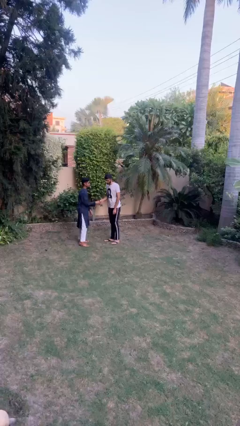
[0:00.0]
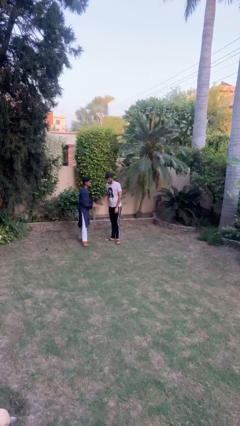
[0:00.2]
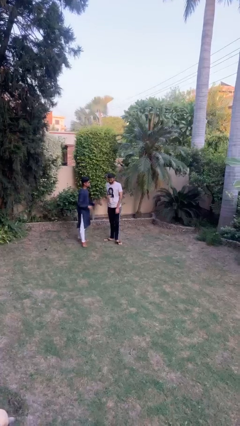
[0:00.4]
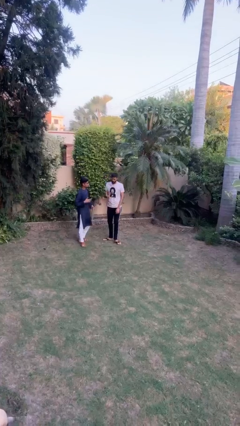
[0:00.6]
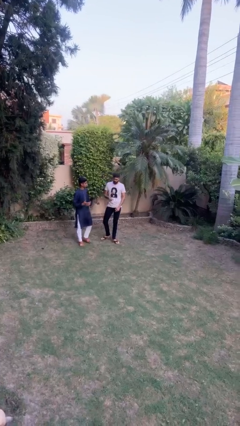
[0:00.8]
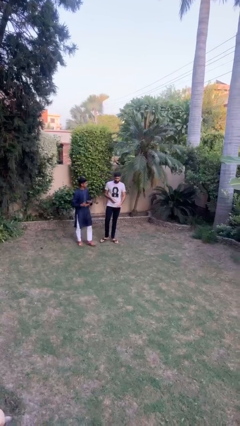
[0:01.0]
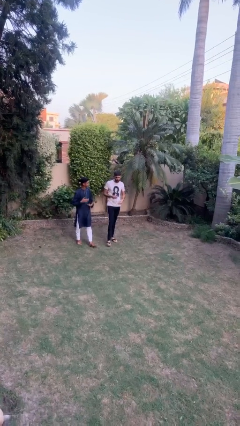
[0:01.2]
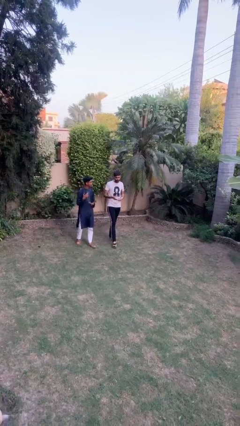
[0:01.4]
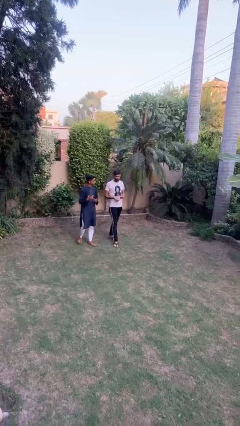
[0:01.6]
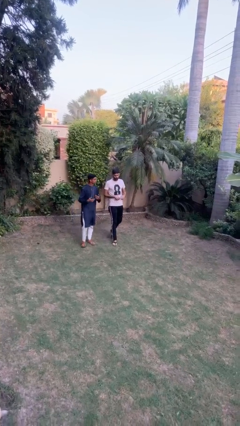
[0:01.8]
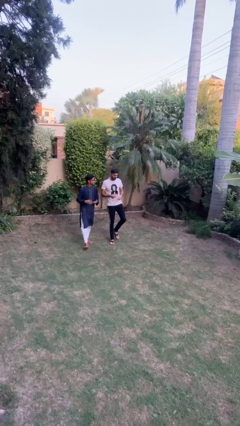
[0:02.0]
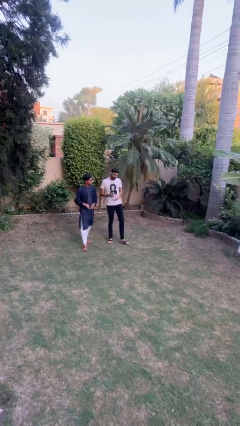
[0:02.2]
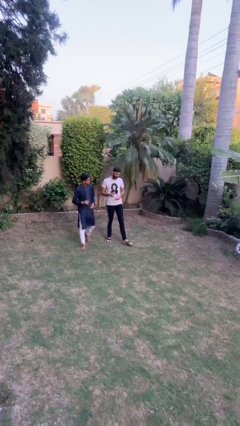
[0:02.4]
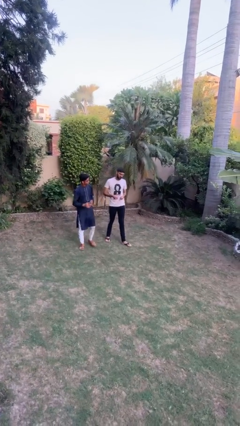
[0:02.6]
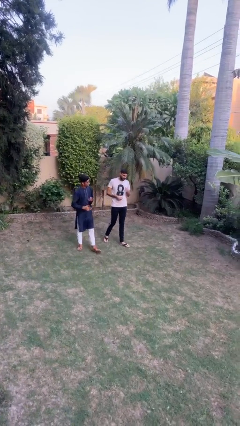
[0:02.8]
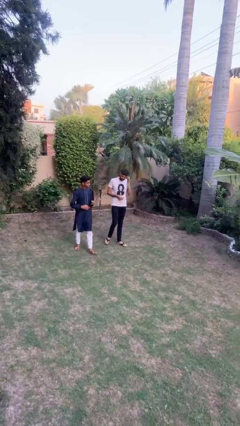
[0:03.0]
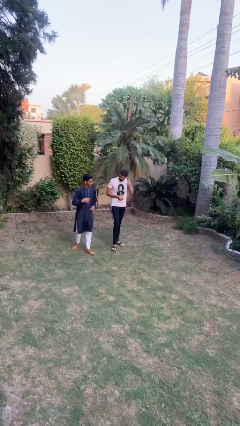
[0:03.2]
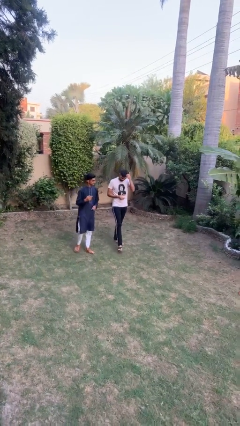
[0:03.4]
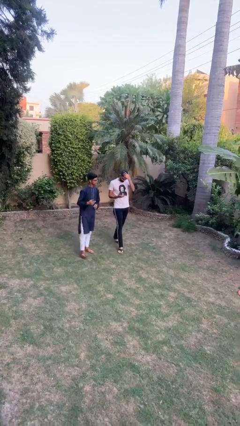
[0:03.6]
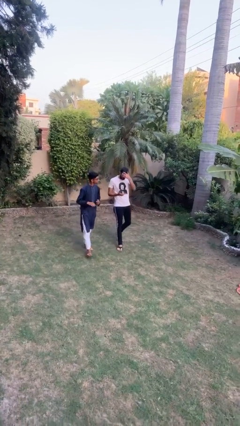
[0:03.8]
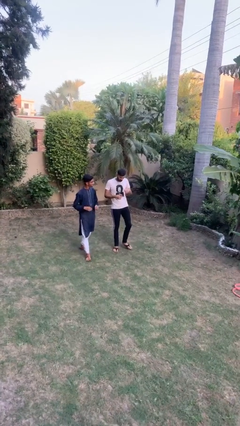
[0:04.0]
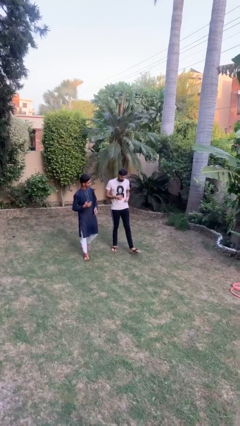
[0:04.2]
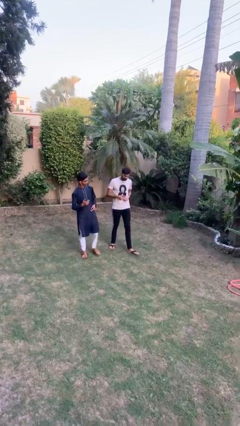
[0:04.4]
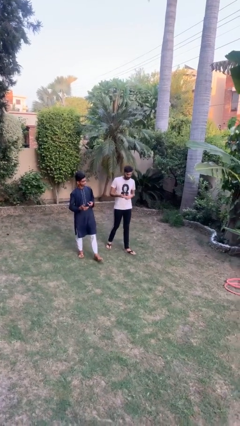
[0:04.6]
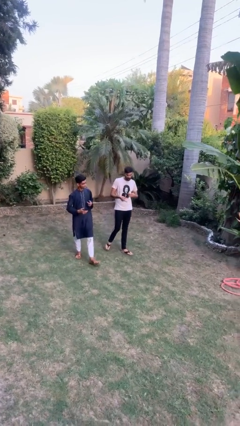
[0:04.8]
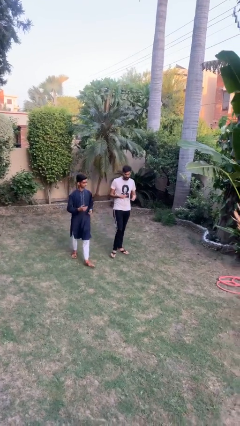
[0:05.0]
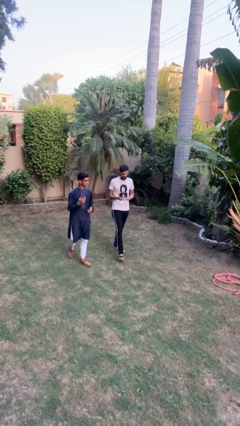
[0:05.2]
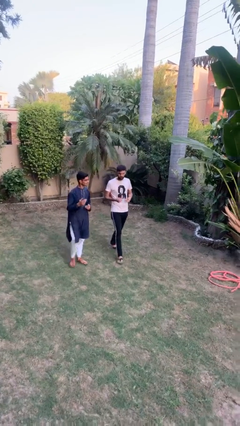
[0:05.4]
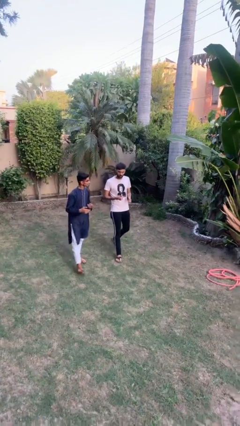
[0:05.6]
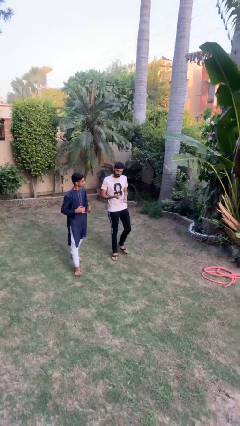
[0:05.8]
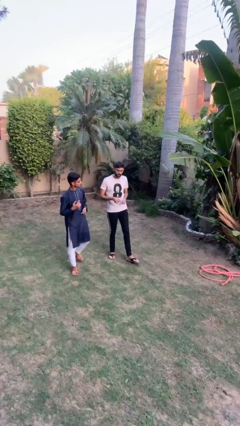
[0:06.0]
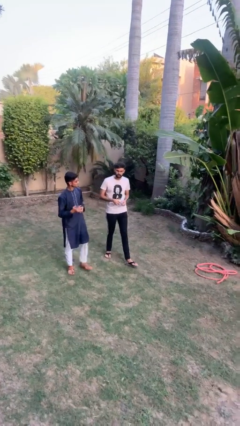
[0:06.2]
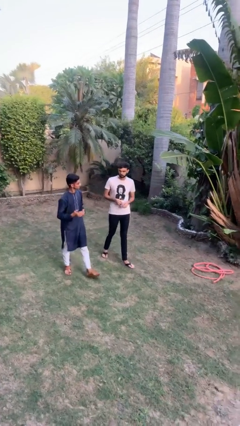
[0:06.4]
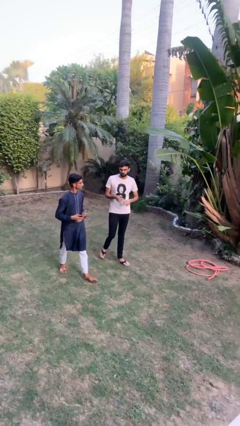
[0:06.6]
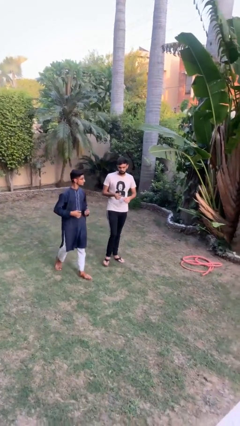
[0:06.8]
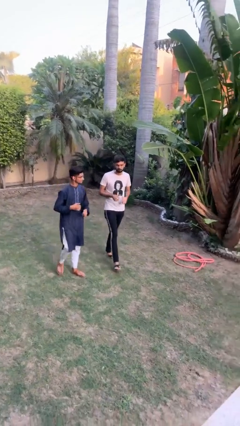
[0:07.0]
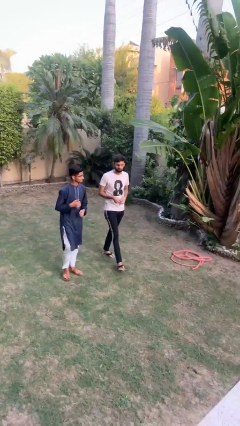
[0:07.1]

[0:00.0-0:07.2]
person talks to person

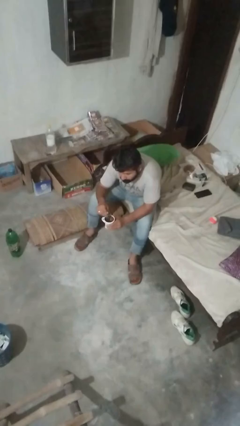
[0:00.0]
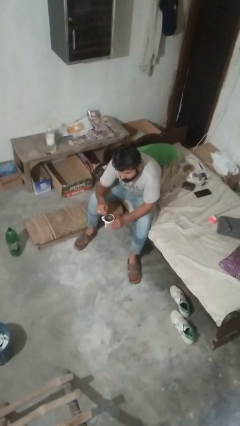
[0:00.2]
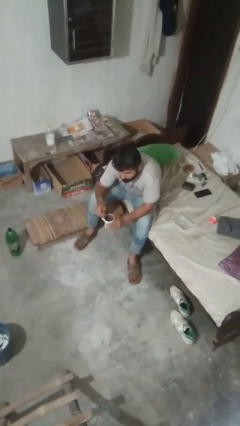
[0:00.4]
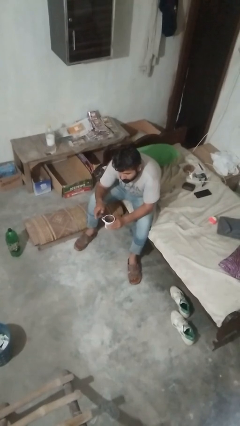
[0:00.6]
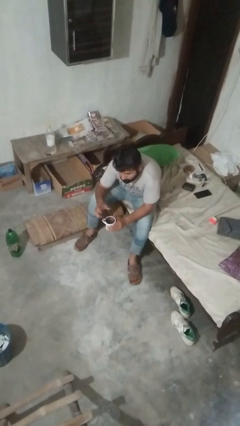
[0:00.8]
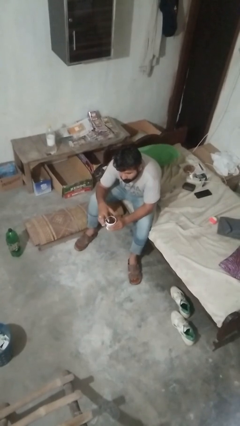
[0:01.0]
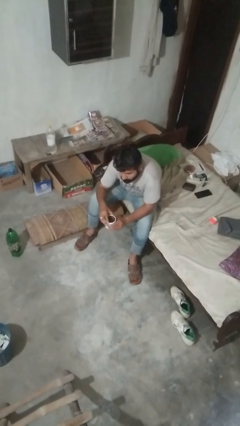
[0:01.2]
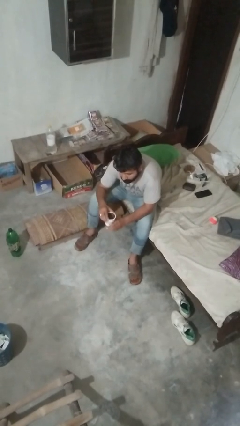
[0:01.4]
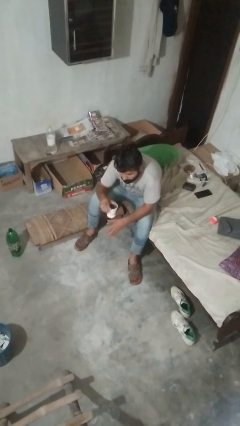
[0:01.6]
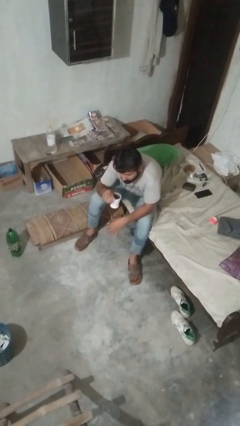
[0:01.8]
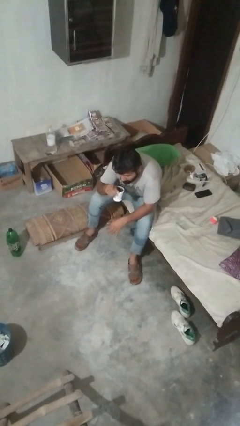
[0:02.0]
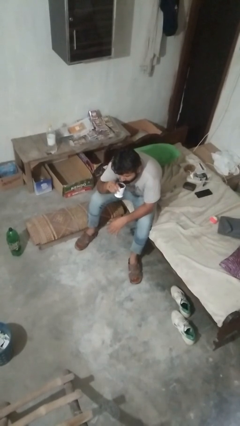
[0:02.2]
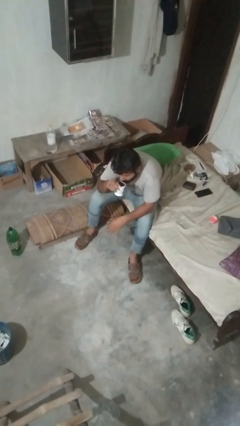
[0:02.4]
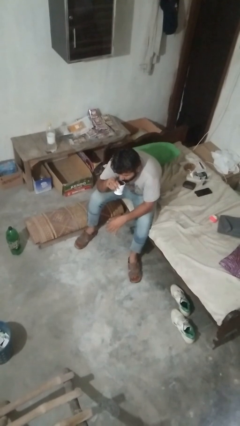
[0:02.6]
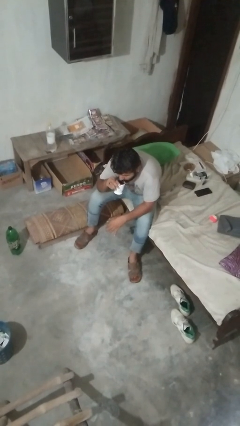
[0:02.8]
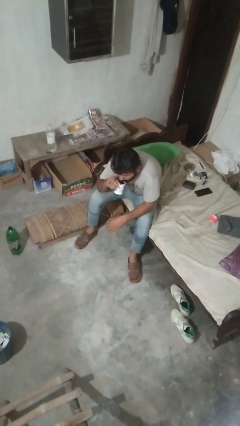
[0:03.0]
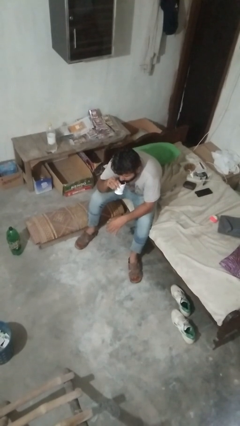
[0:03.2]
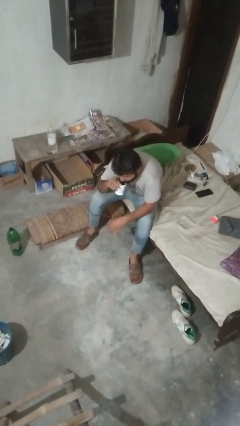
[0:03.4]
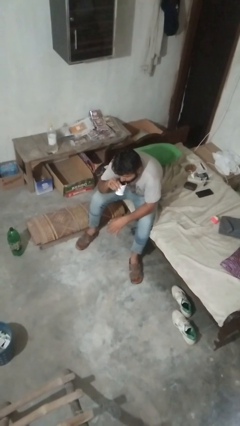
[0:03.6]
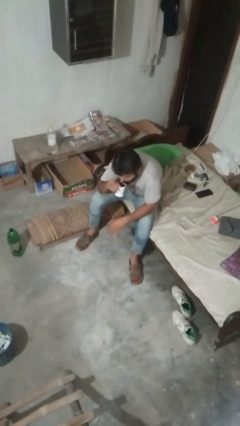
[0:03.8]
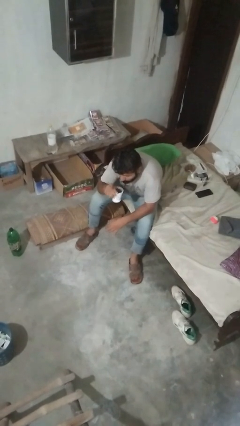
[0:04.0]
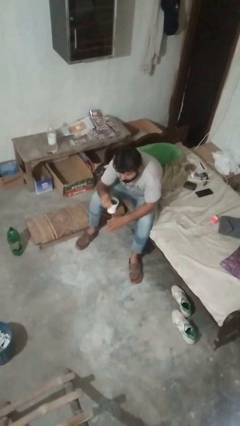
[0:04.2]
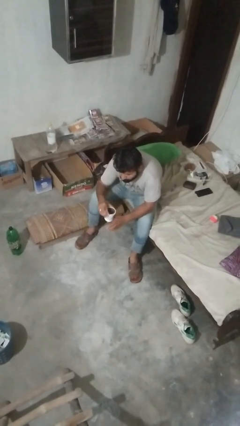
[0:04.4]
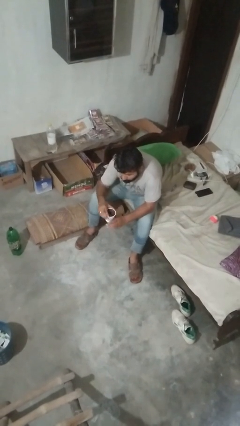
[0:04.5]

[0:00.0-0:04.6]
person drinks from mug

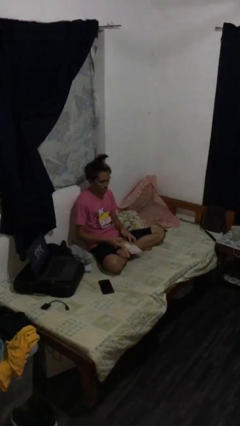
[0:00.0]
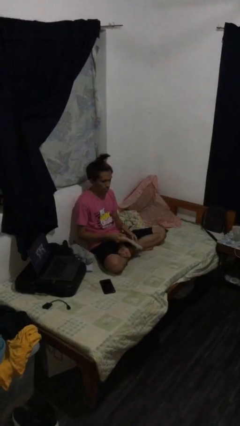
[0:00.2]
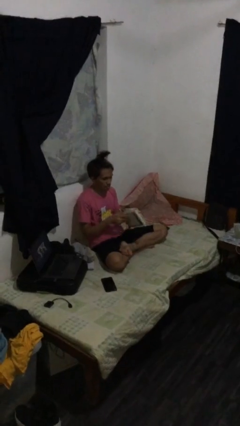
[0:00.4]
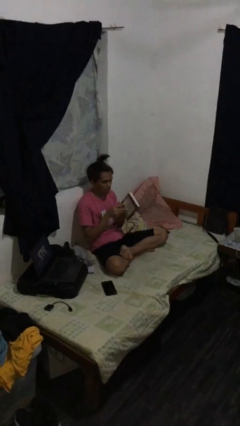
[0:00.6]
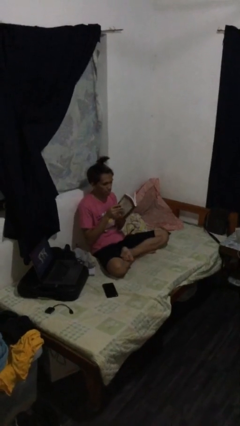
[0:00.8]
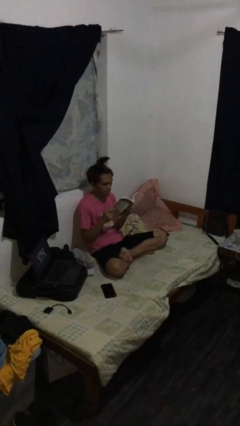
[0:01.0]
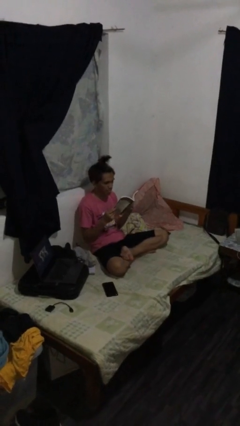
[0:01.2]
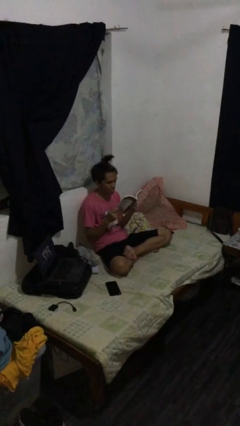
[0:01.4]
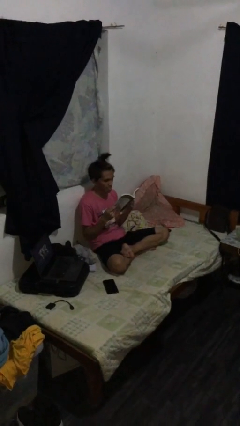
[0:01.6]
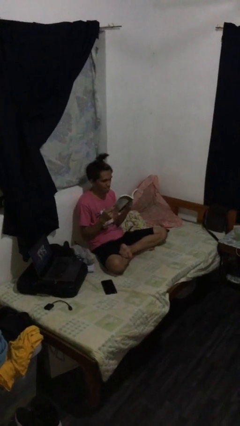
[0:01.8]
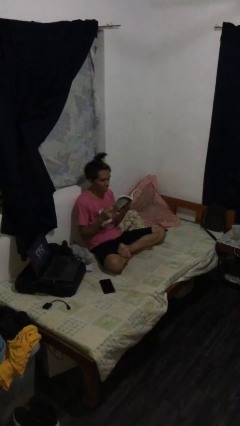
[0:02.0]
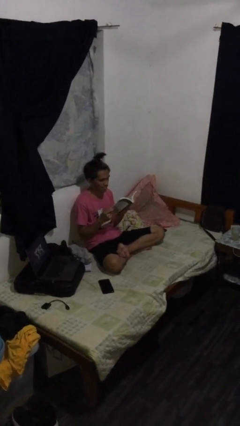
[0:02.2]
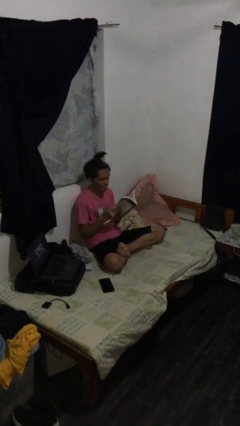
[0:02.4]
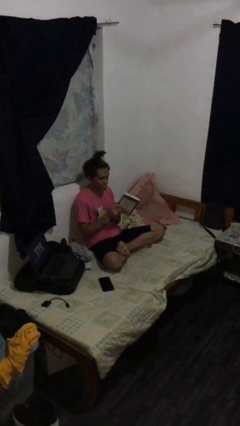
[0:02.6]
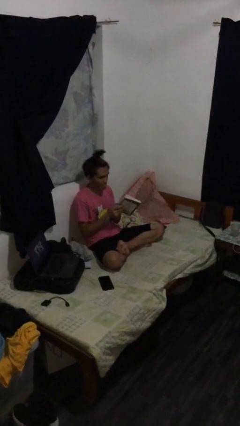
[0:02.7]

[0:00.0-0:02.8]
person reads document

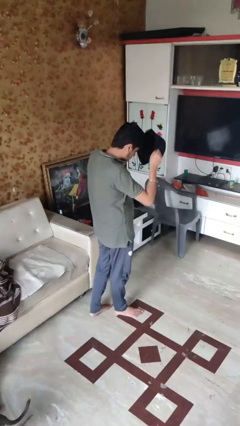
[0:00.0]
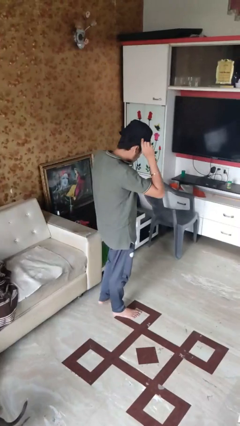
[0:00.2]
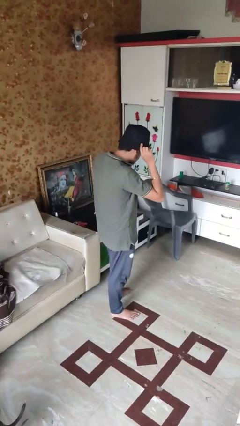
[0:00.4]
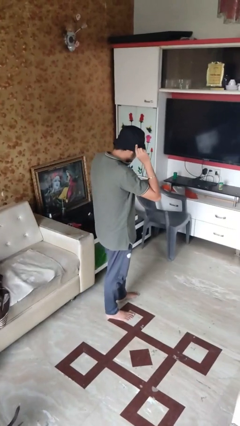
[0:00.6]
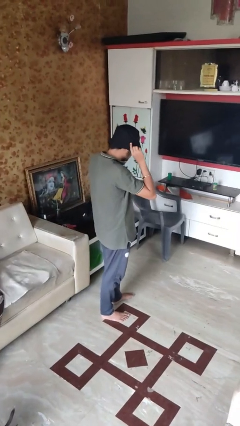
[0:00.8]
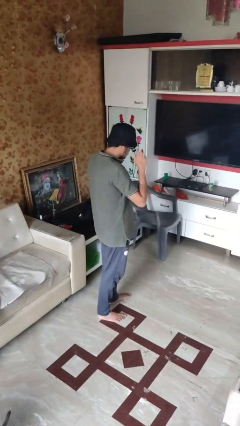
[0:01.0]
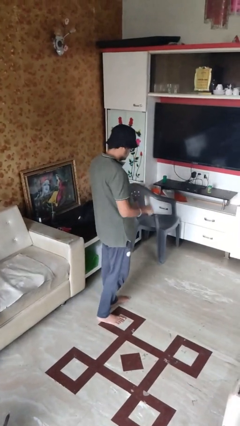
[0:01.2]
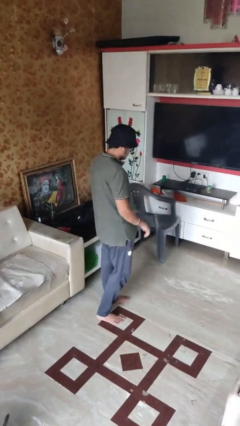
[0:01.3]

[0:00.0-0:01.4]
person puts on hat

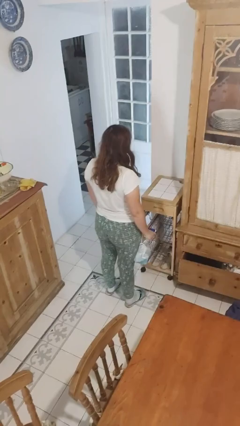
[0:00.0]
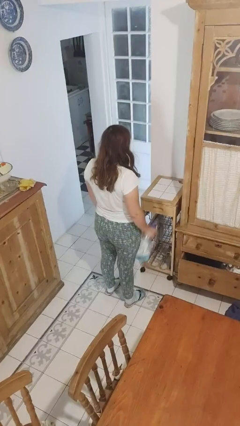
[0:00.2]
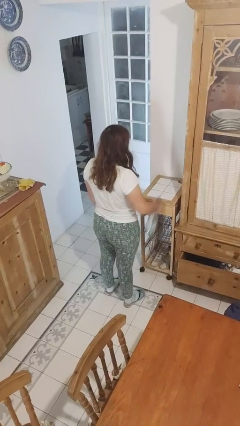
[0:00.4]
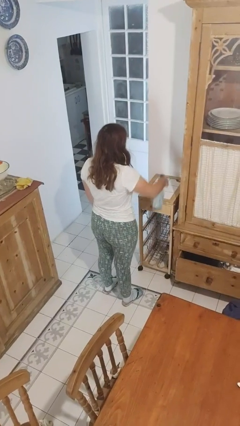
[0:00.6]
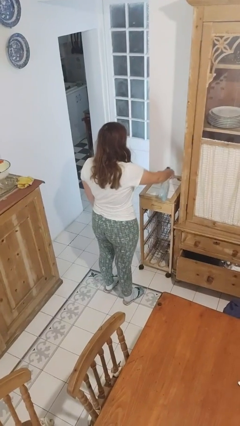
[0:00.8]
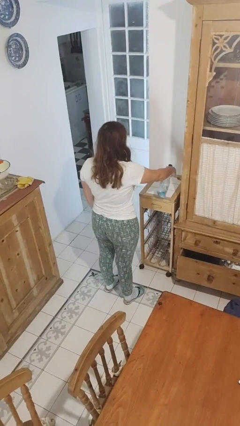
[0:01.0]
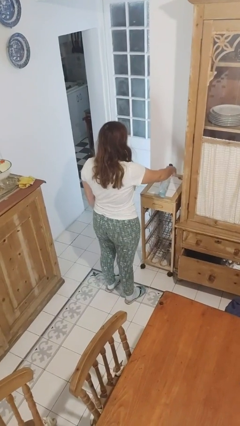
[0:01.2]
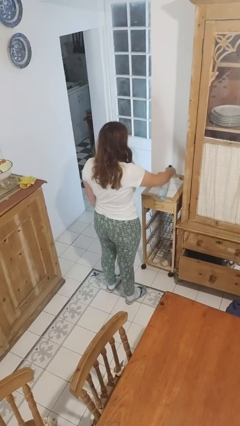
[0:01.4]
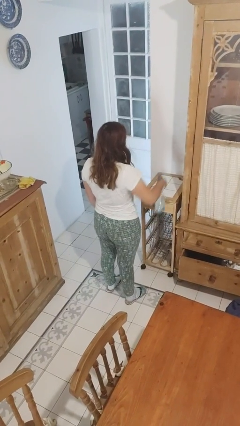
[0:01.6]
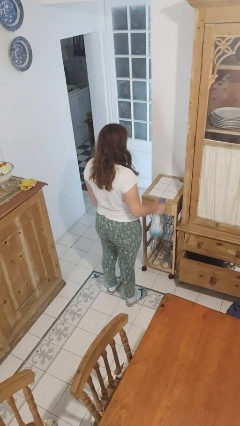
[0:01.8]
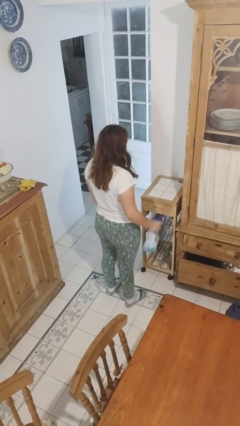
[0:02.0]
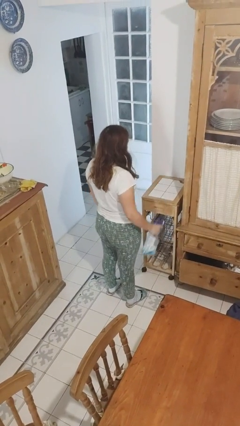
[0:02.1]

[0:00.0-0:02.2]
person sprays from bottle
